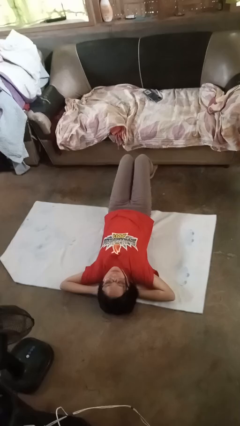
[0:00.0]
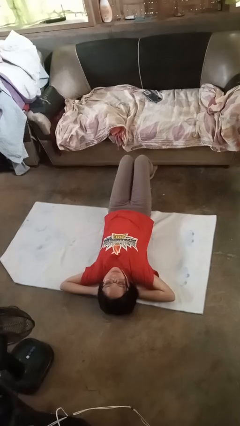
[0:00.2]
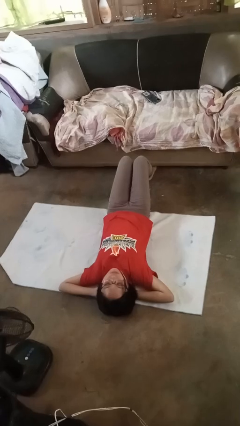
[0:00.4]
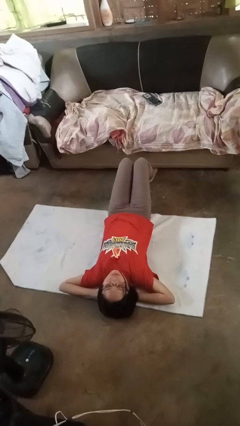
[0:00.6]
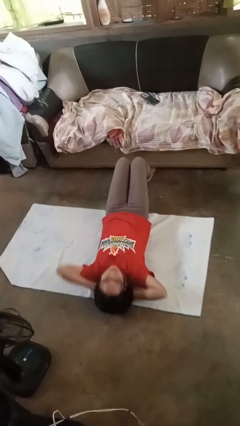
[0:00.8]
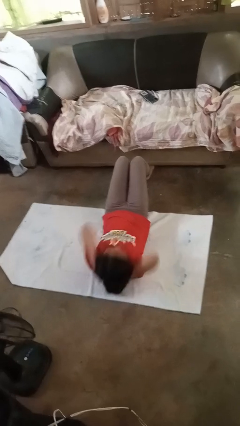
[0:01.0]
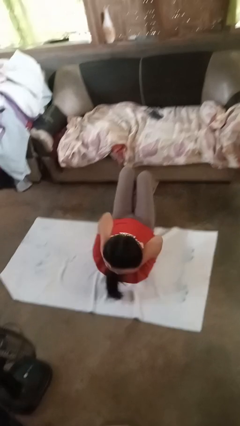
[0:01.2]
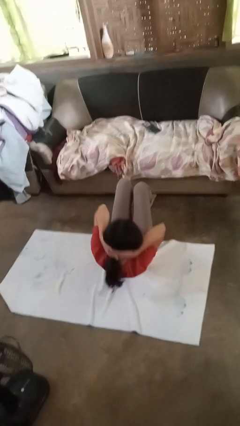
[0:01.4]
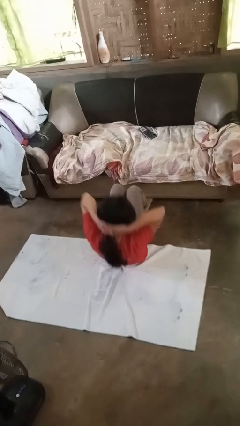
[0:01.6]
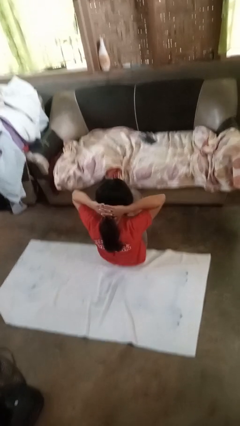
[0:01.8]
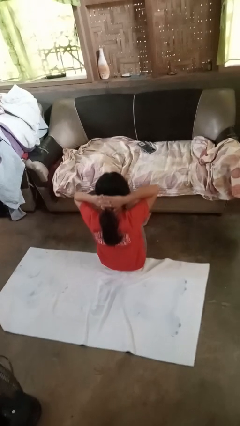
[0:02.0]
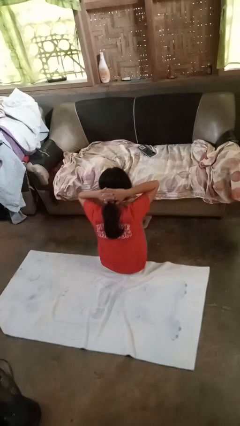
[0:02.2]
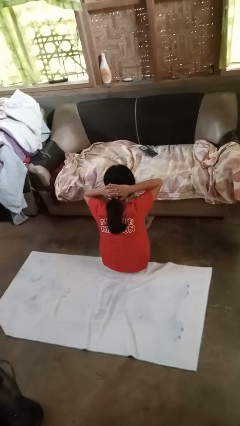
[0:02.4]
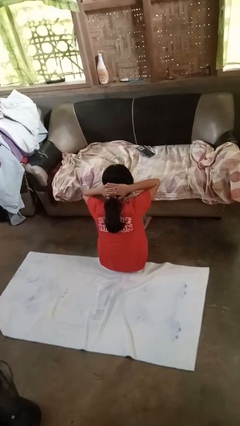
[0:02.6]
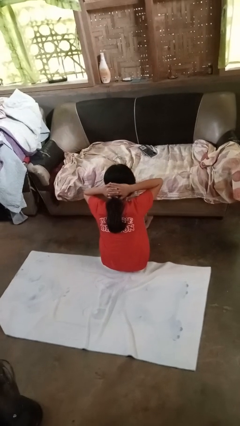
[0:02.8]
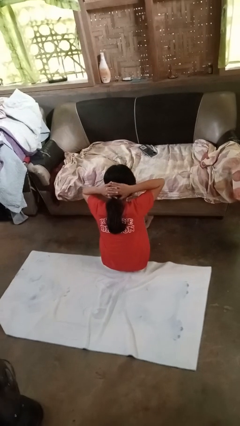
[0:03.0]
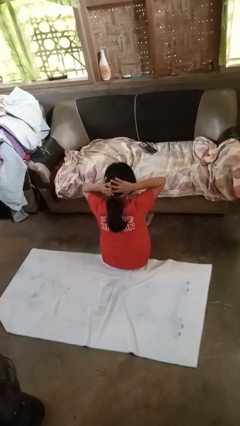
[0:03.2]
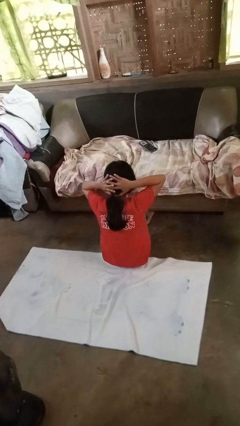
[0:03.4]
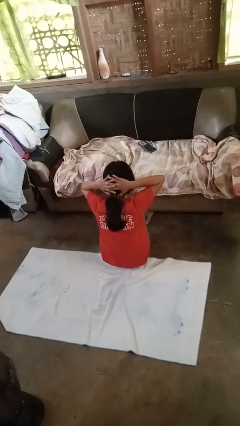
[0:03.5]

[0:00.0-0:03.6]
person exercises with situp

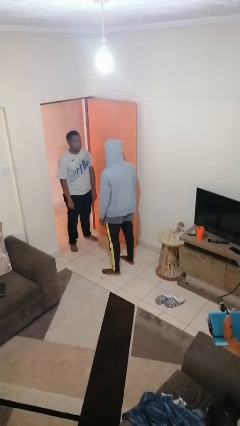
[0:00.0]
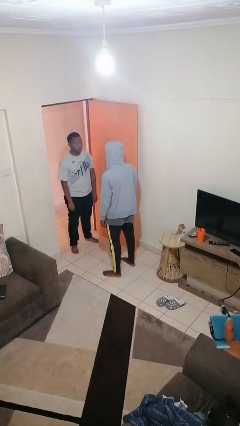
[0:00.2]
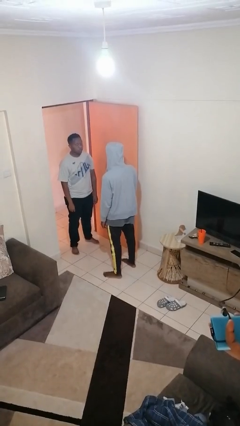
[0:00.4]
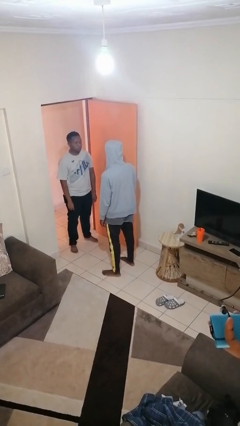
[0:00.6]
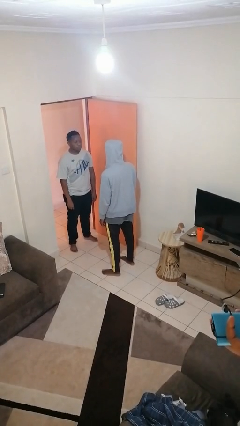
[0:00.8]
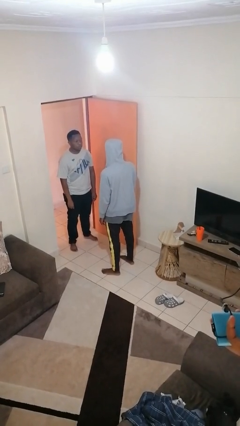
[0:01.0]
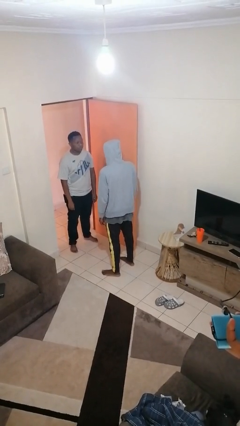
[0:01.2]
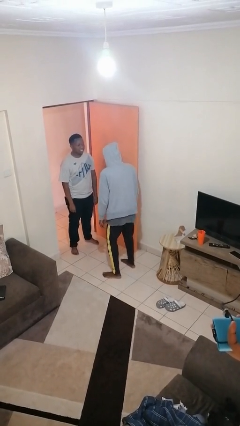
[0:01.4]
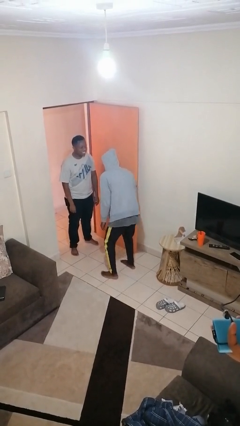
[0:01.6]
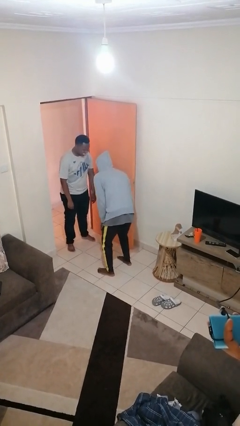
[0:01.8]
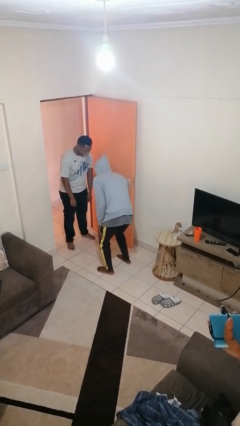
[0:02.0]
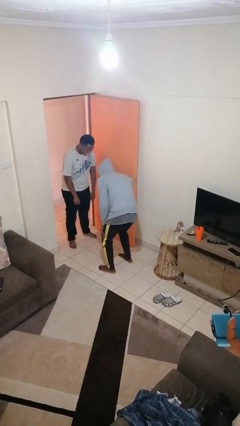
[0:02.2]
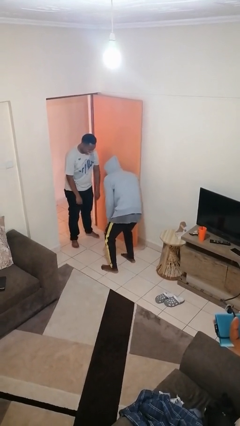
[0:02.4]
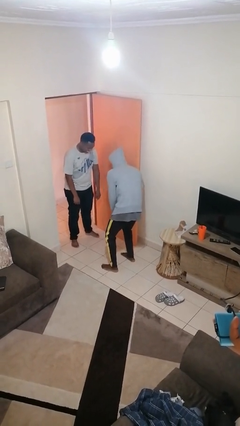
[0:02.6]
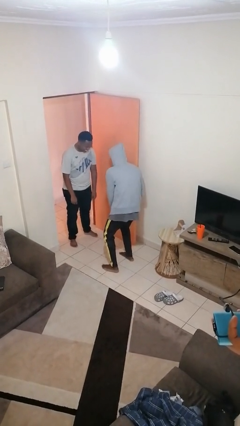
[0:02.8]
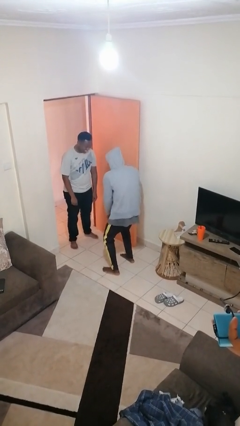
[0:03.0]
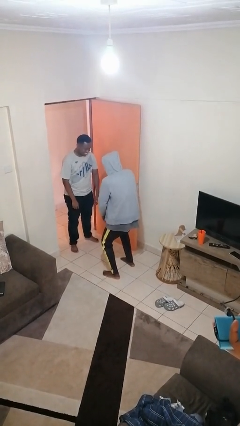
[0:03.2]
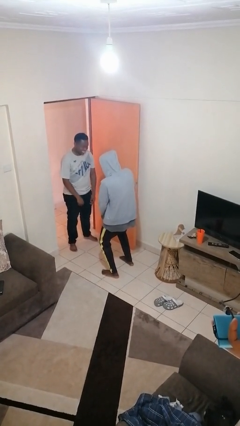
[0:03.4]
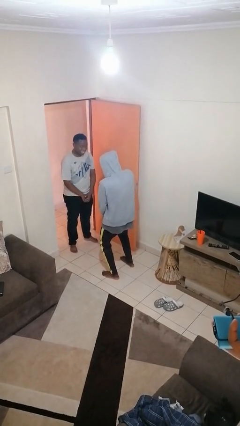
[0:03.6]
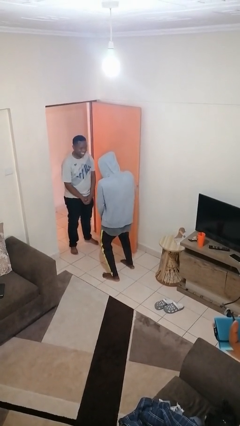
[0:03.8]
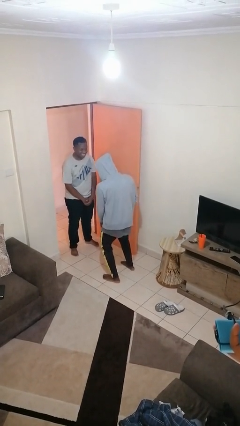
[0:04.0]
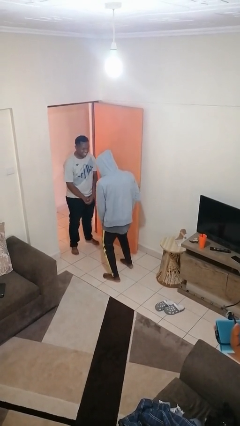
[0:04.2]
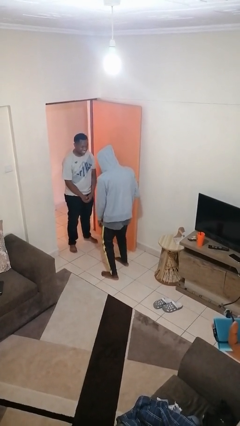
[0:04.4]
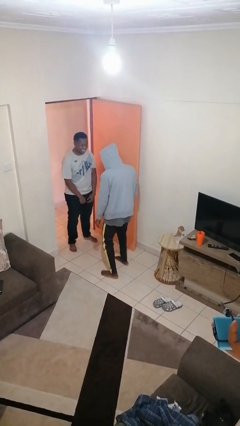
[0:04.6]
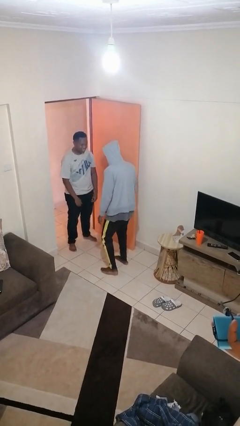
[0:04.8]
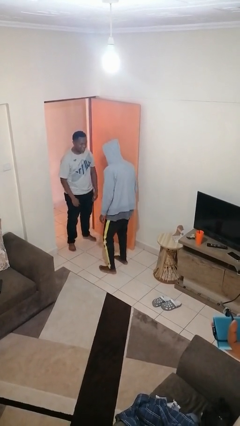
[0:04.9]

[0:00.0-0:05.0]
person laughs with person

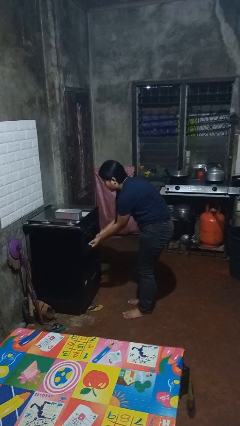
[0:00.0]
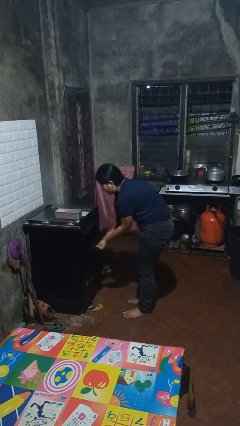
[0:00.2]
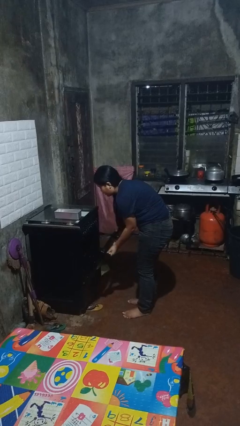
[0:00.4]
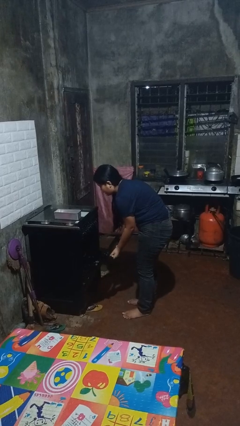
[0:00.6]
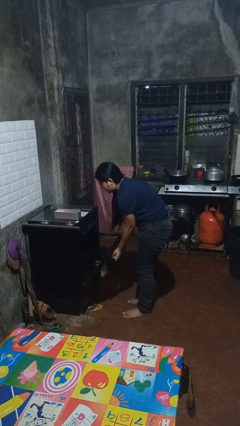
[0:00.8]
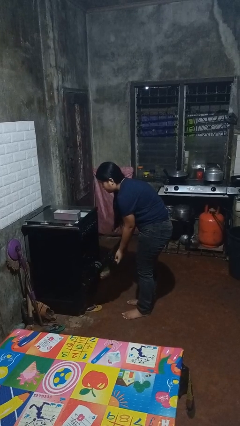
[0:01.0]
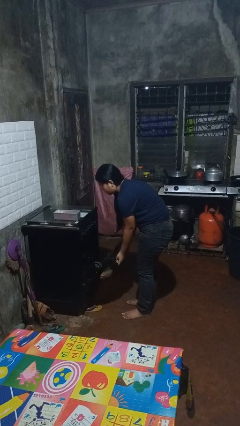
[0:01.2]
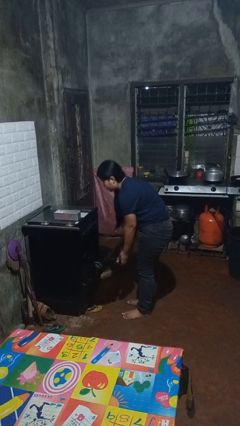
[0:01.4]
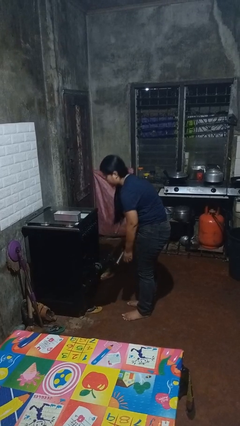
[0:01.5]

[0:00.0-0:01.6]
person opens oven door

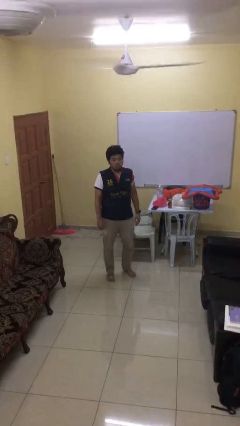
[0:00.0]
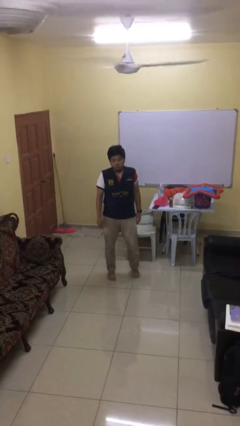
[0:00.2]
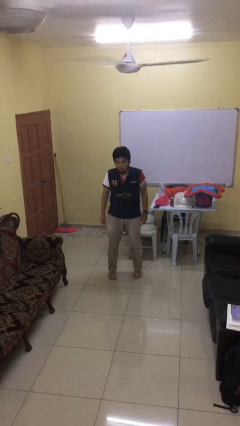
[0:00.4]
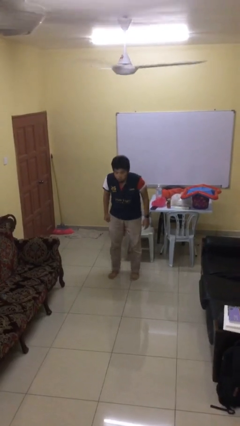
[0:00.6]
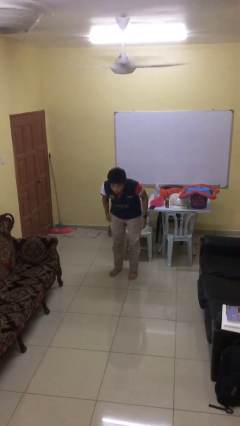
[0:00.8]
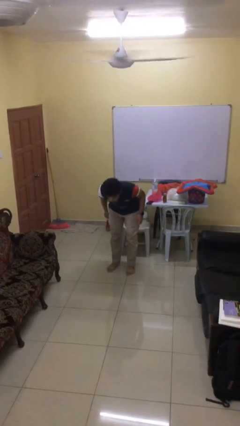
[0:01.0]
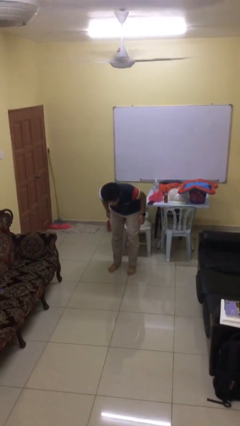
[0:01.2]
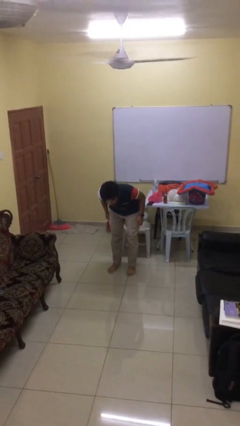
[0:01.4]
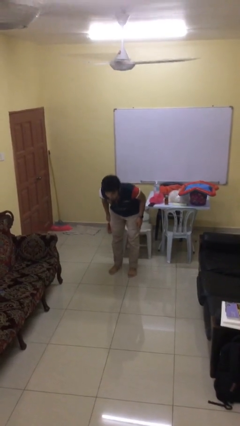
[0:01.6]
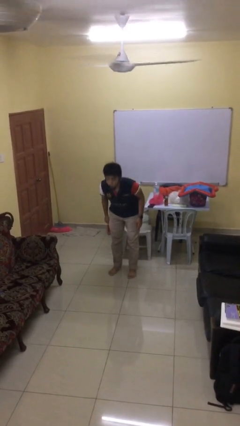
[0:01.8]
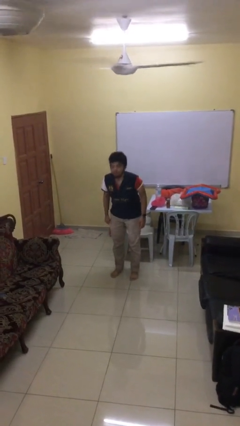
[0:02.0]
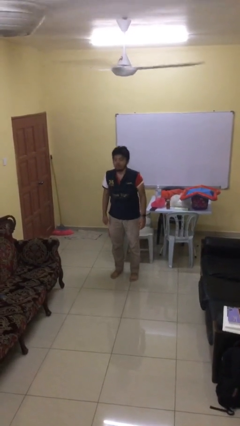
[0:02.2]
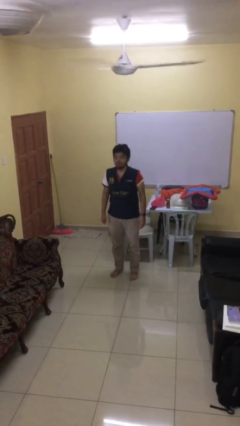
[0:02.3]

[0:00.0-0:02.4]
person bows

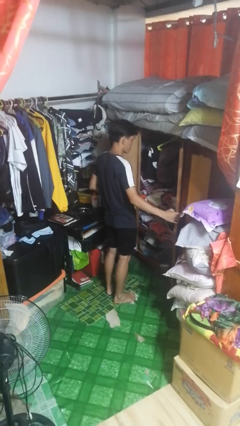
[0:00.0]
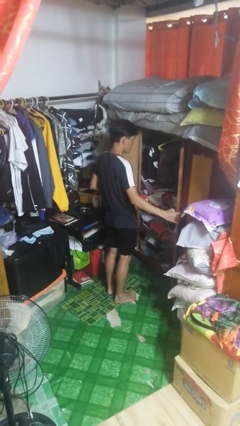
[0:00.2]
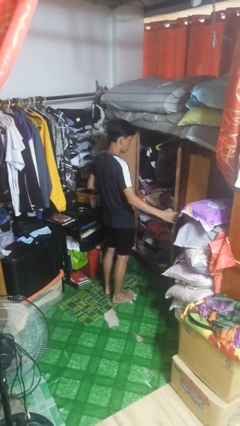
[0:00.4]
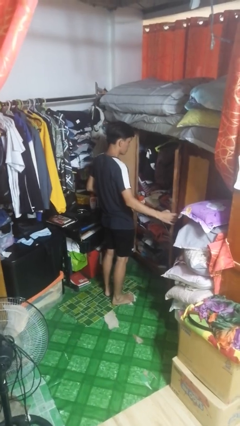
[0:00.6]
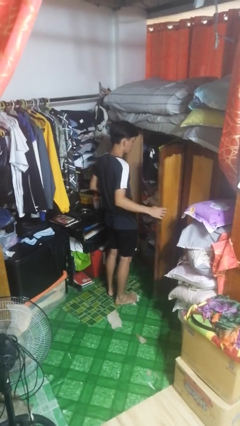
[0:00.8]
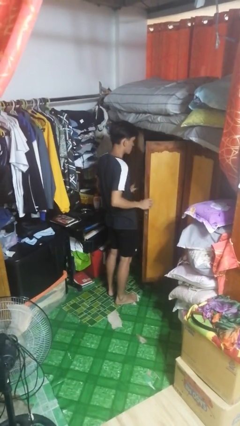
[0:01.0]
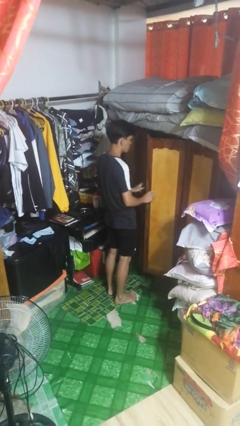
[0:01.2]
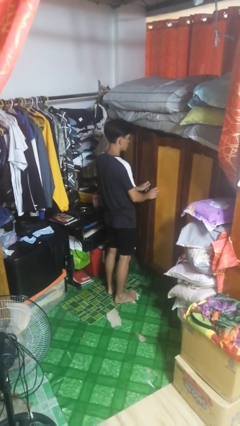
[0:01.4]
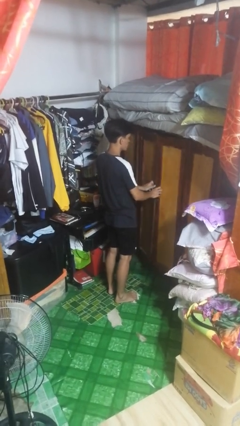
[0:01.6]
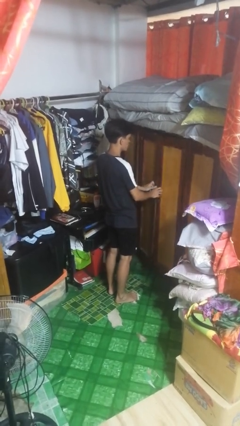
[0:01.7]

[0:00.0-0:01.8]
person closes dresser drawer

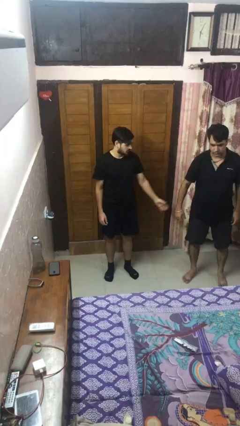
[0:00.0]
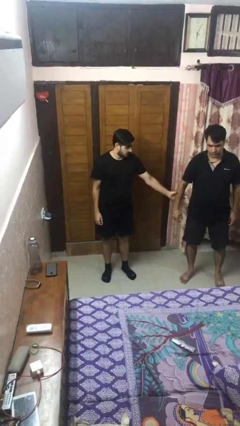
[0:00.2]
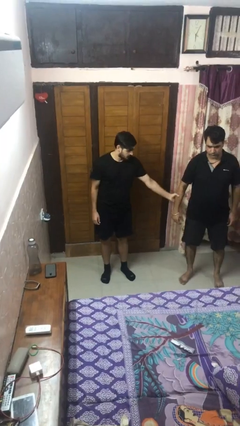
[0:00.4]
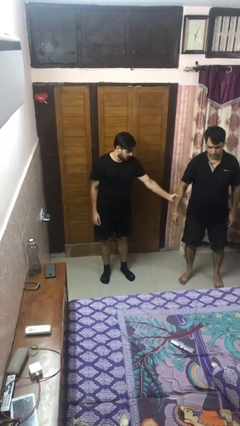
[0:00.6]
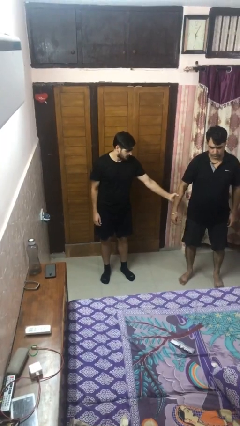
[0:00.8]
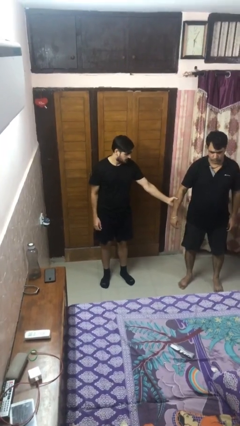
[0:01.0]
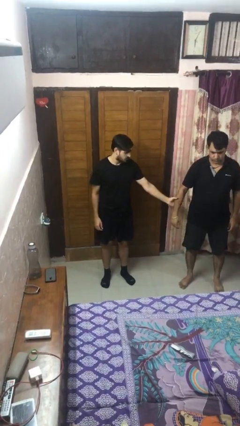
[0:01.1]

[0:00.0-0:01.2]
person grabs person by forearm

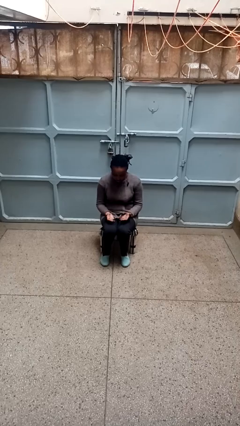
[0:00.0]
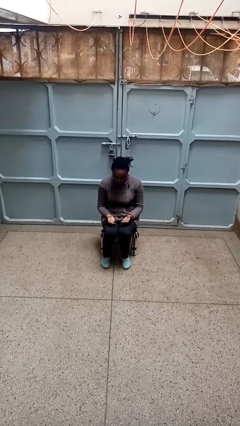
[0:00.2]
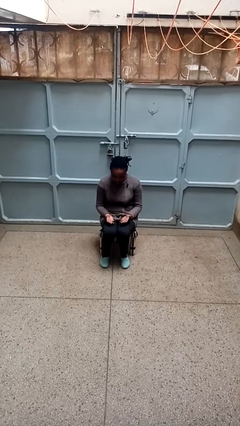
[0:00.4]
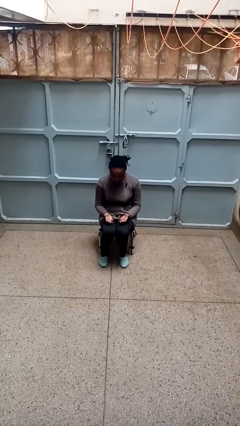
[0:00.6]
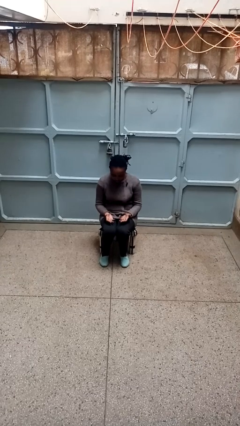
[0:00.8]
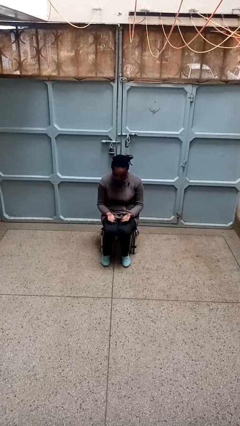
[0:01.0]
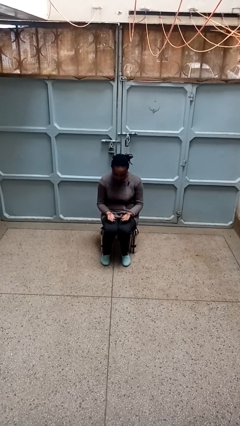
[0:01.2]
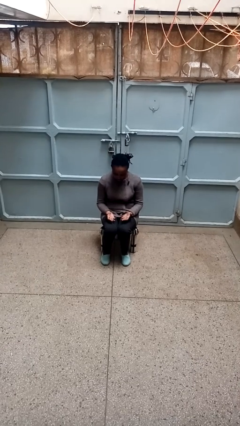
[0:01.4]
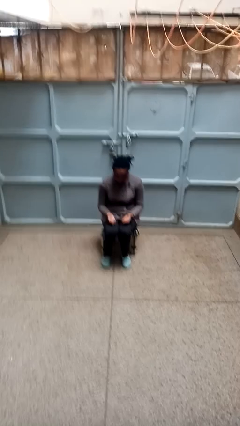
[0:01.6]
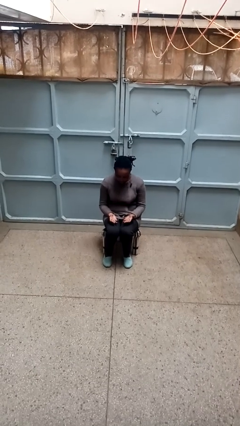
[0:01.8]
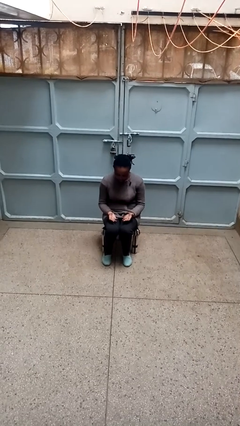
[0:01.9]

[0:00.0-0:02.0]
person looks at hands in lap
